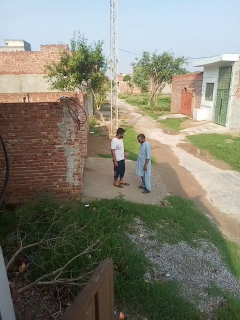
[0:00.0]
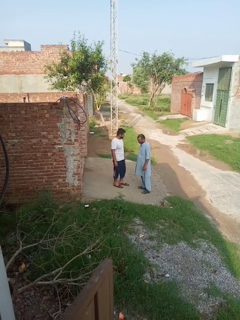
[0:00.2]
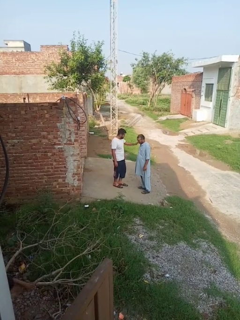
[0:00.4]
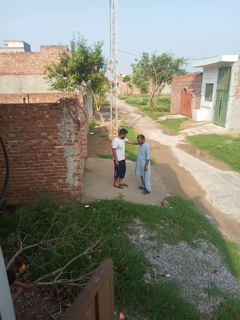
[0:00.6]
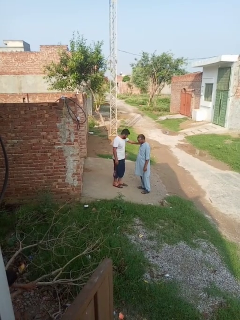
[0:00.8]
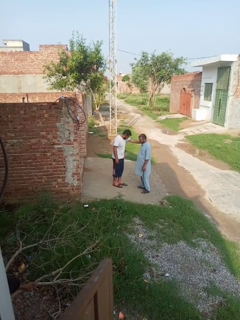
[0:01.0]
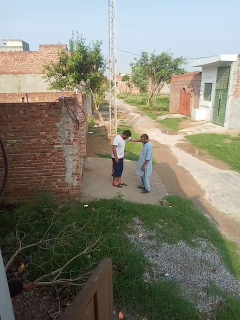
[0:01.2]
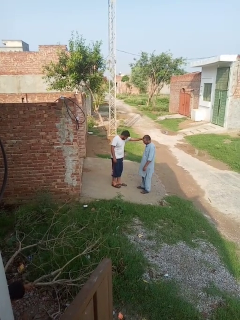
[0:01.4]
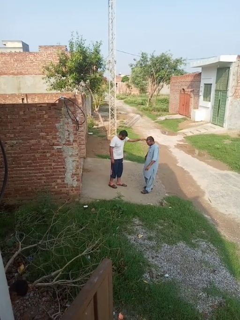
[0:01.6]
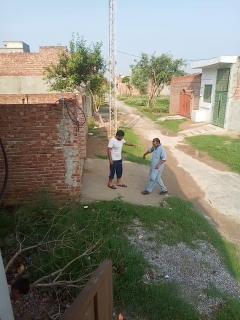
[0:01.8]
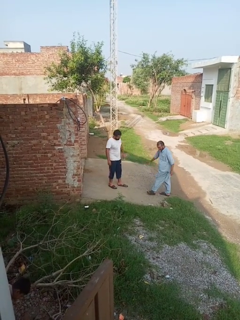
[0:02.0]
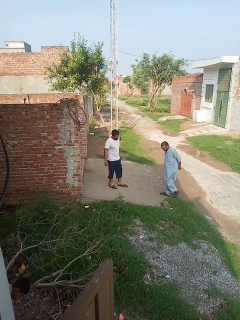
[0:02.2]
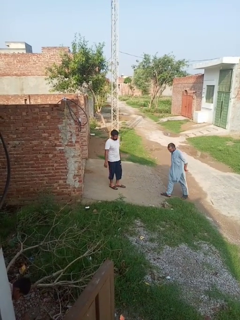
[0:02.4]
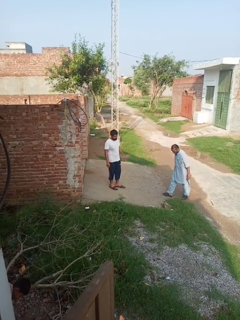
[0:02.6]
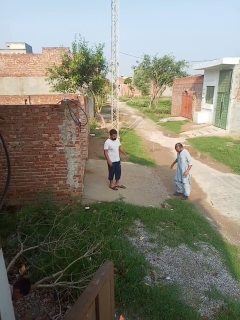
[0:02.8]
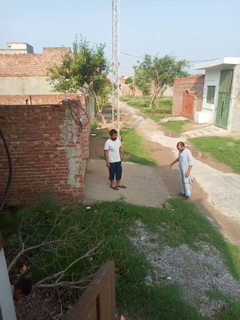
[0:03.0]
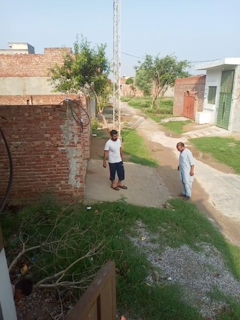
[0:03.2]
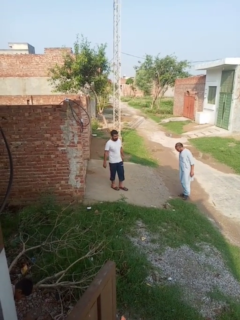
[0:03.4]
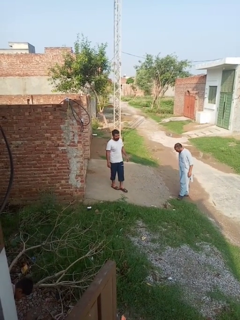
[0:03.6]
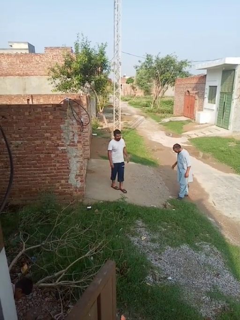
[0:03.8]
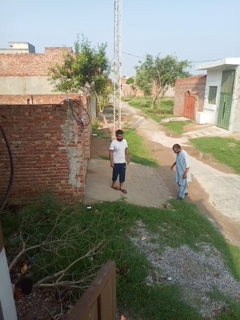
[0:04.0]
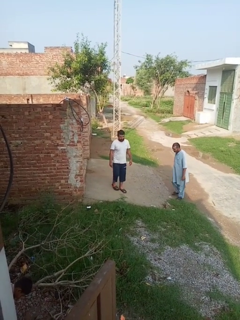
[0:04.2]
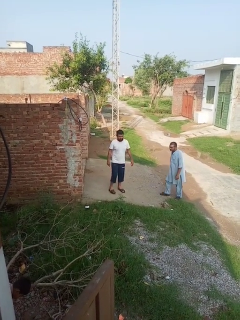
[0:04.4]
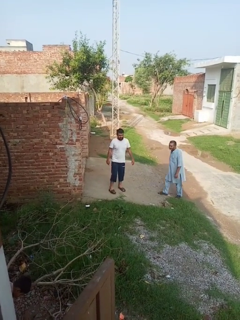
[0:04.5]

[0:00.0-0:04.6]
person shoves person

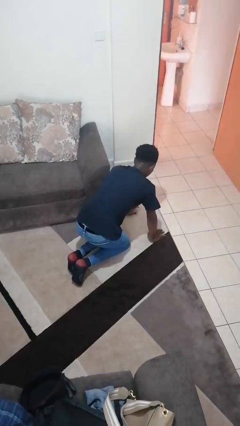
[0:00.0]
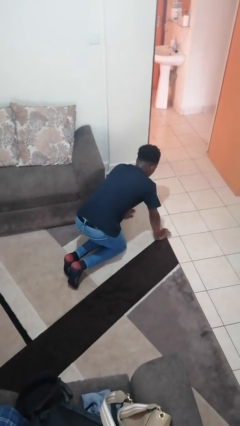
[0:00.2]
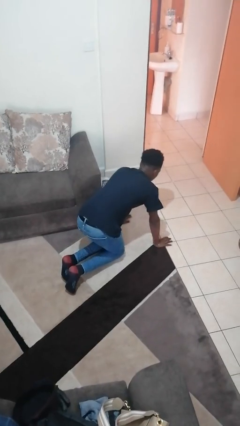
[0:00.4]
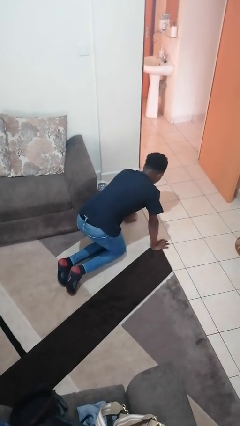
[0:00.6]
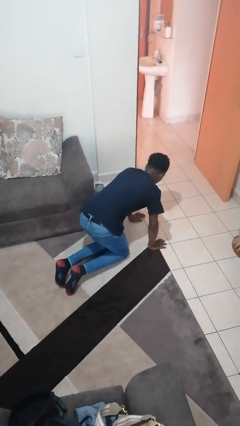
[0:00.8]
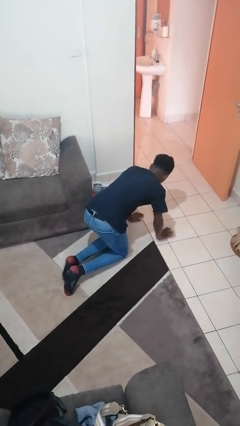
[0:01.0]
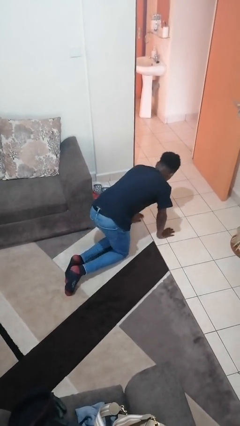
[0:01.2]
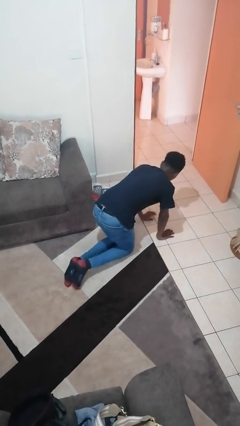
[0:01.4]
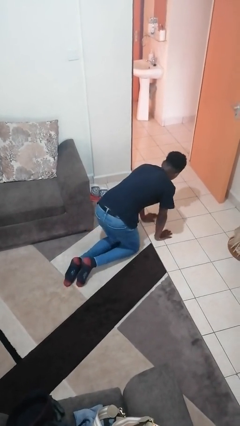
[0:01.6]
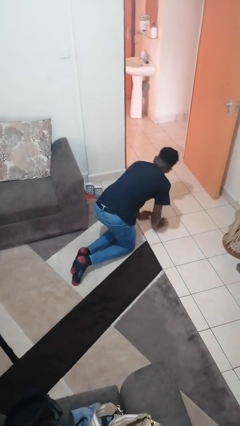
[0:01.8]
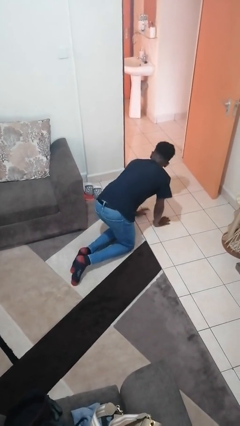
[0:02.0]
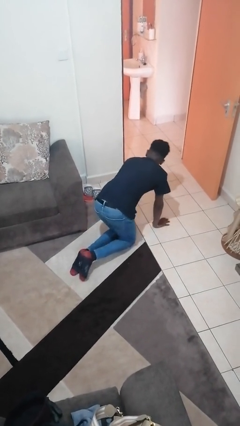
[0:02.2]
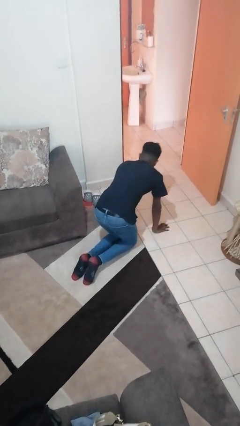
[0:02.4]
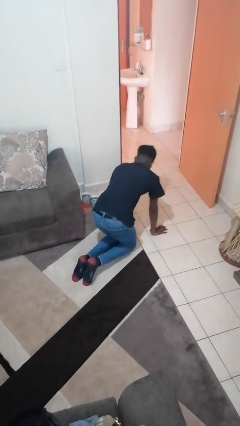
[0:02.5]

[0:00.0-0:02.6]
person crawls

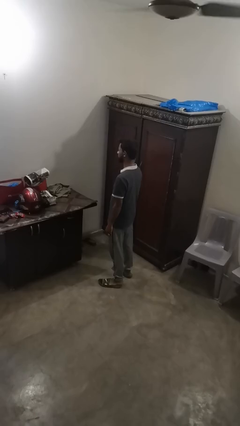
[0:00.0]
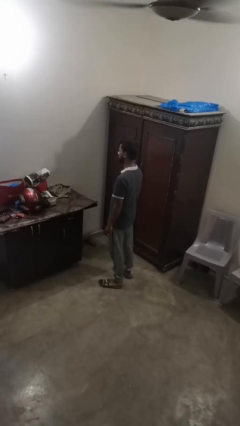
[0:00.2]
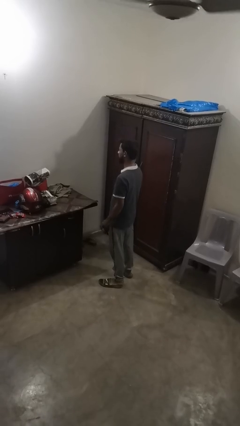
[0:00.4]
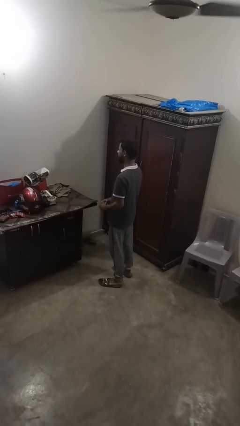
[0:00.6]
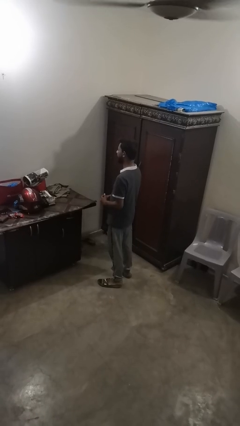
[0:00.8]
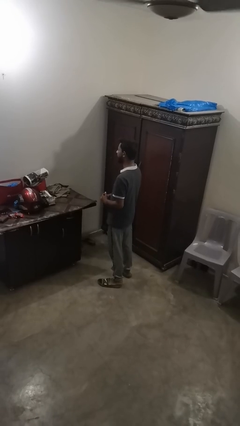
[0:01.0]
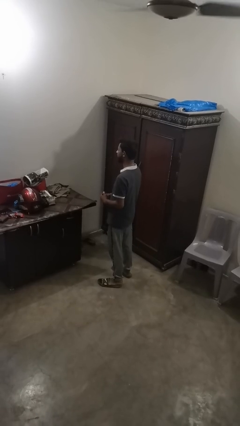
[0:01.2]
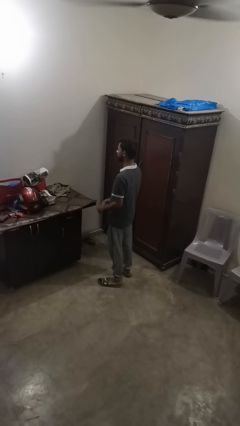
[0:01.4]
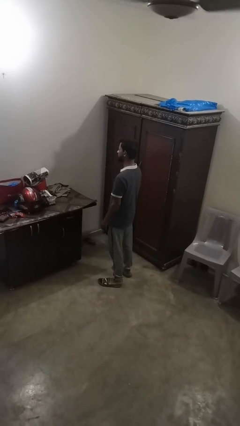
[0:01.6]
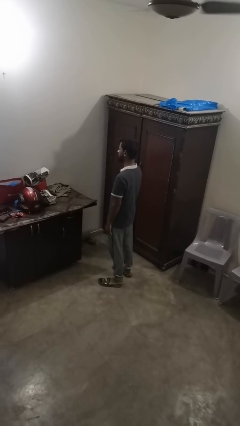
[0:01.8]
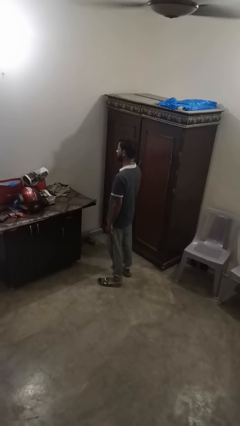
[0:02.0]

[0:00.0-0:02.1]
person takes off ring

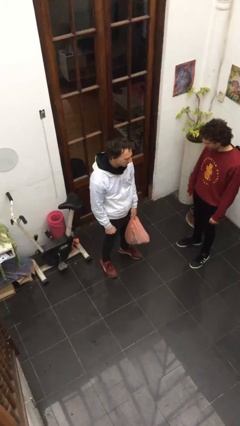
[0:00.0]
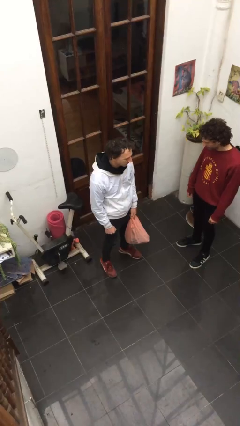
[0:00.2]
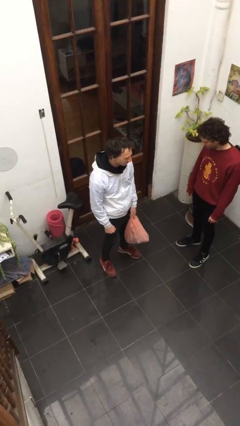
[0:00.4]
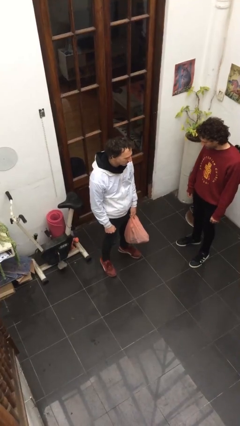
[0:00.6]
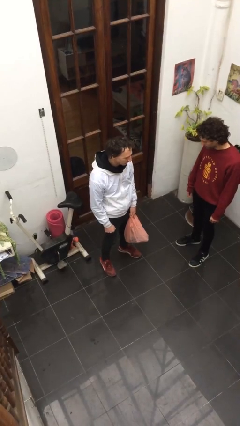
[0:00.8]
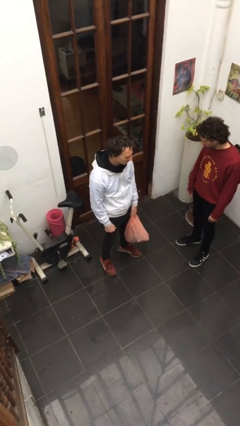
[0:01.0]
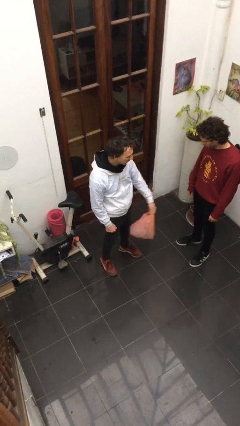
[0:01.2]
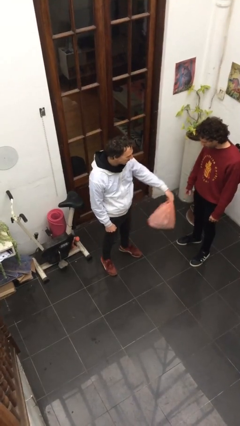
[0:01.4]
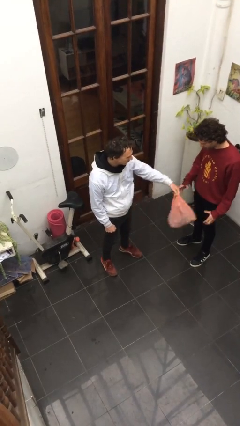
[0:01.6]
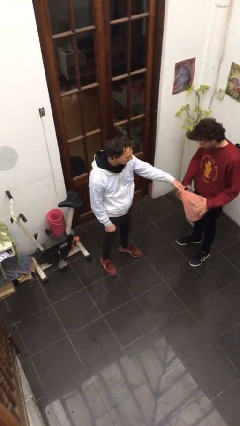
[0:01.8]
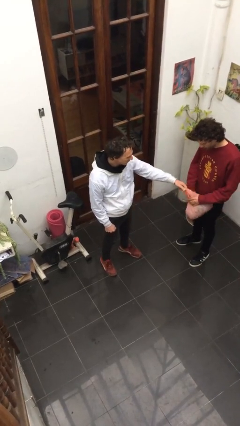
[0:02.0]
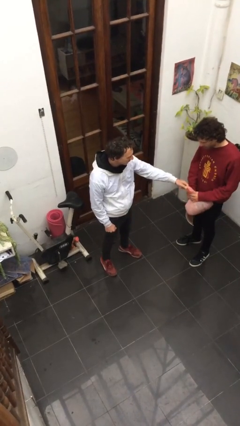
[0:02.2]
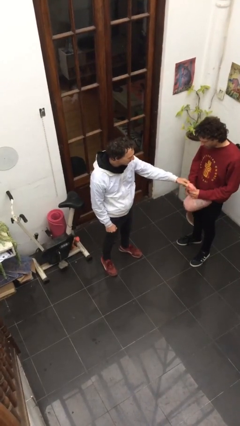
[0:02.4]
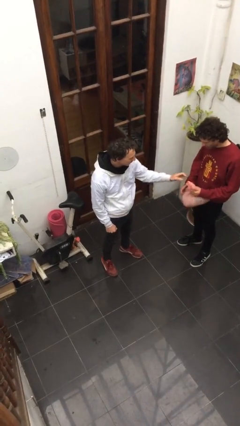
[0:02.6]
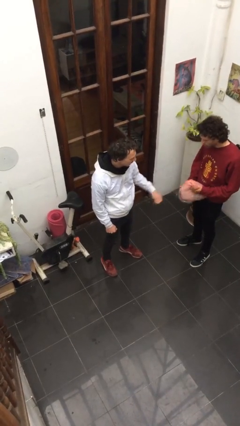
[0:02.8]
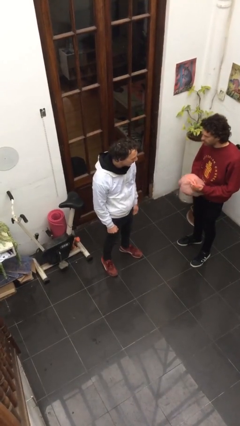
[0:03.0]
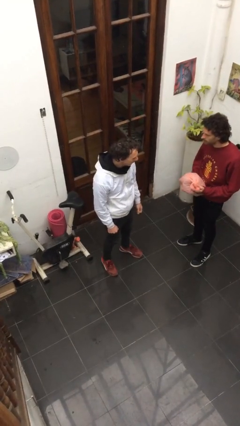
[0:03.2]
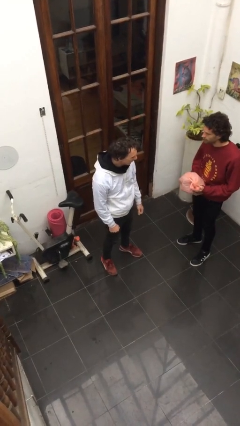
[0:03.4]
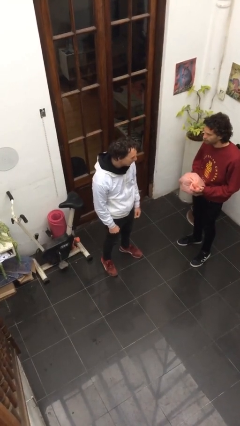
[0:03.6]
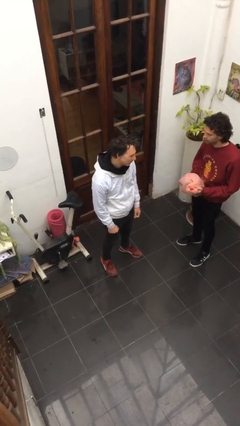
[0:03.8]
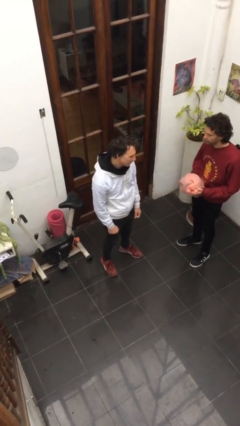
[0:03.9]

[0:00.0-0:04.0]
person transfers object to person

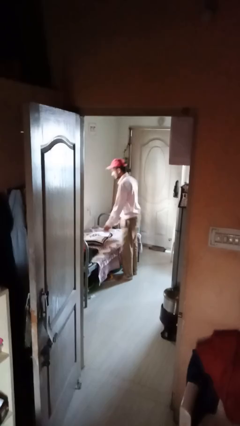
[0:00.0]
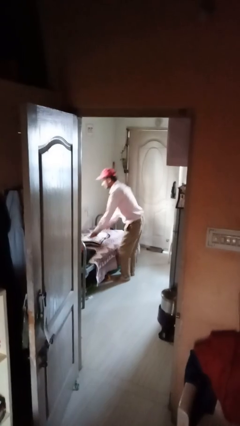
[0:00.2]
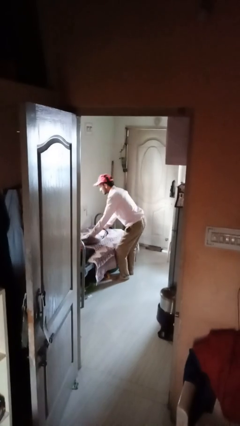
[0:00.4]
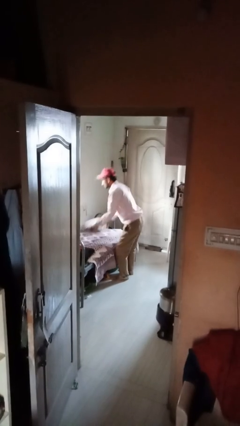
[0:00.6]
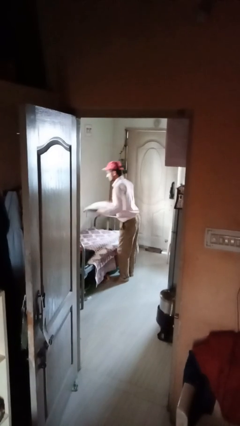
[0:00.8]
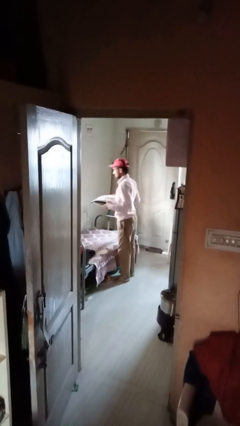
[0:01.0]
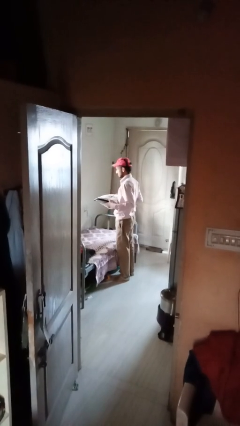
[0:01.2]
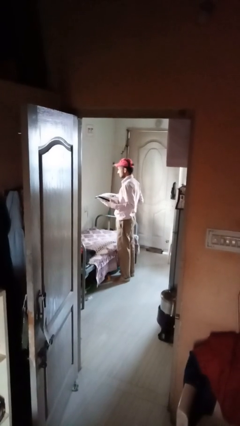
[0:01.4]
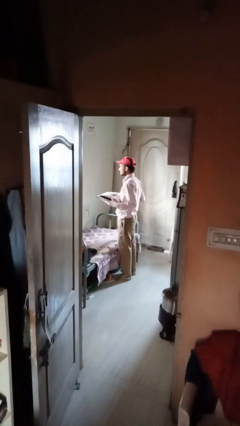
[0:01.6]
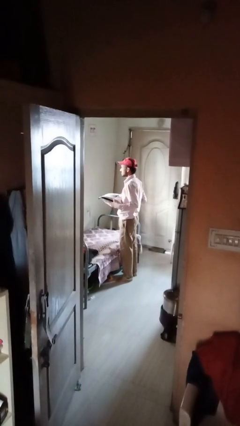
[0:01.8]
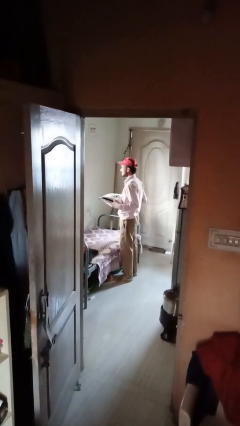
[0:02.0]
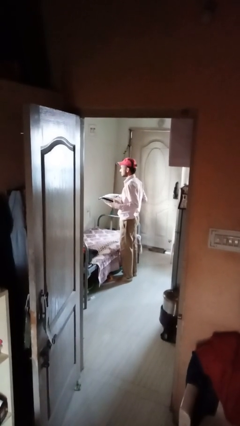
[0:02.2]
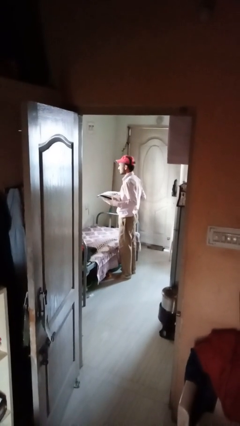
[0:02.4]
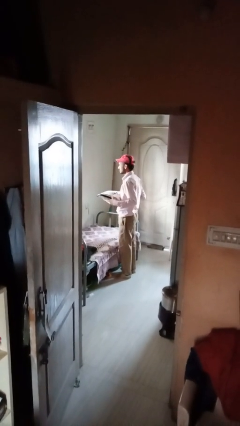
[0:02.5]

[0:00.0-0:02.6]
person picks up object from bed

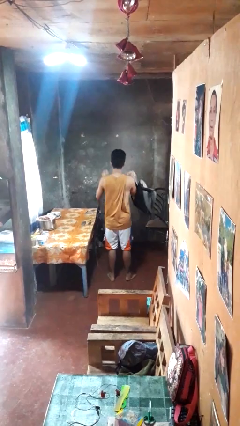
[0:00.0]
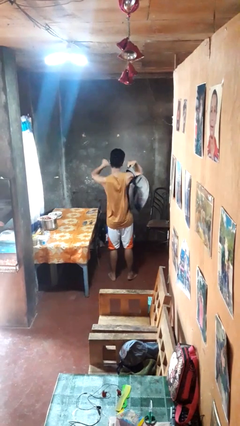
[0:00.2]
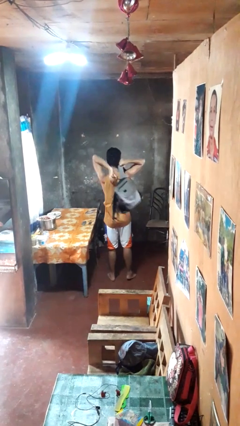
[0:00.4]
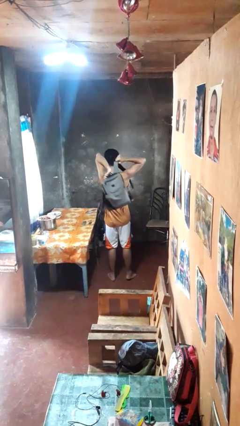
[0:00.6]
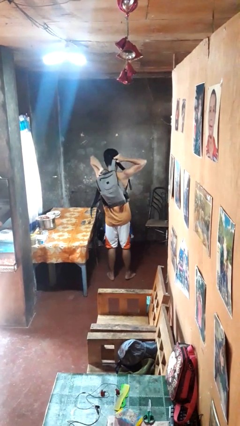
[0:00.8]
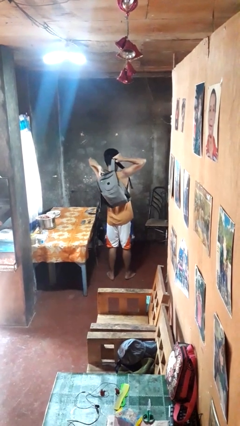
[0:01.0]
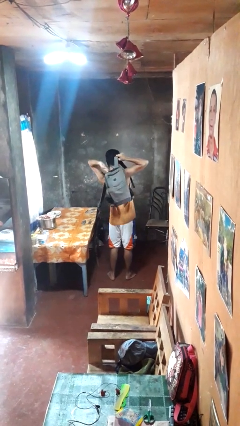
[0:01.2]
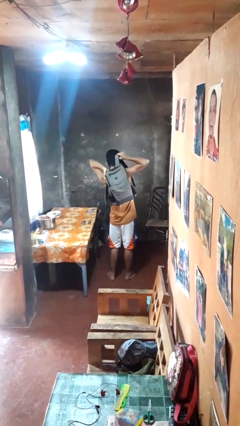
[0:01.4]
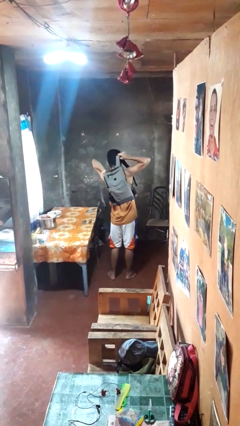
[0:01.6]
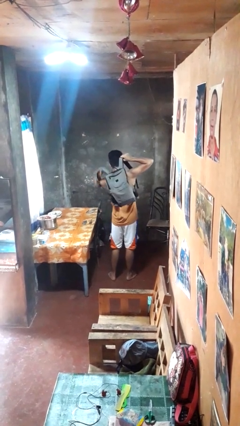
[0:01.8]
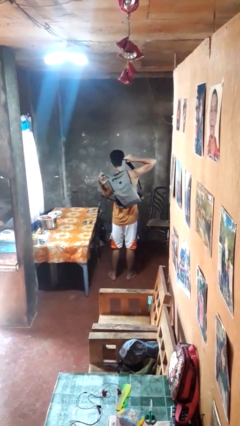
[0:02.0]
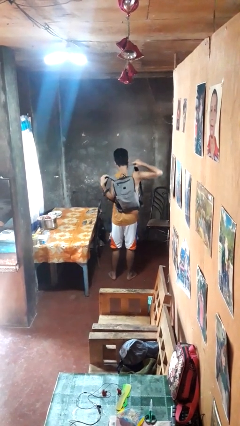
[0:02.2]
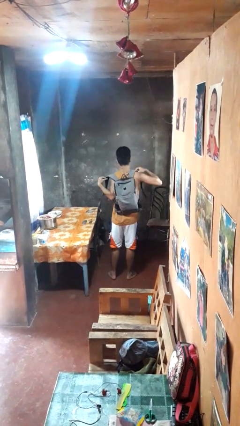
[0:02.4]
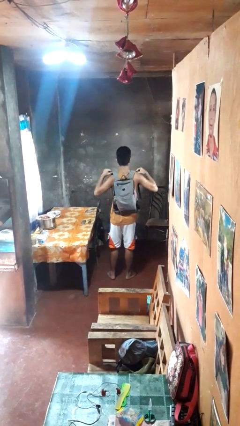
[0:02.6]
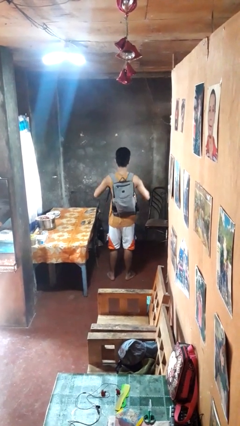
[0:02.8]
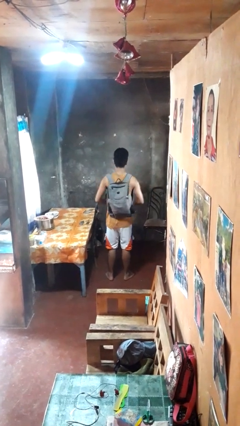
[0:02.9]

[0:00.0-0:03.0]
person puts on backpack
